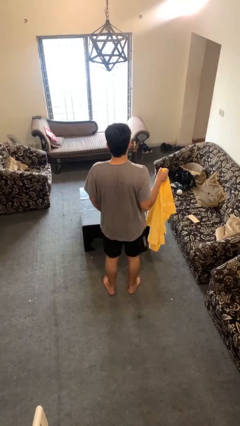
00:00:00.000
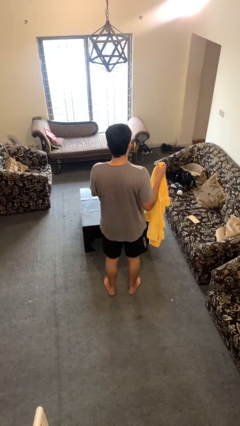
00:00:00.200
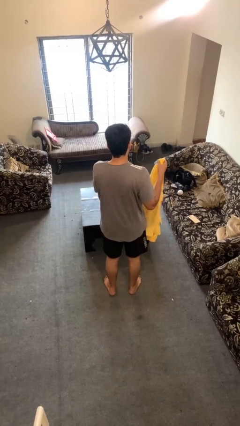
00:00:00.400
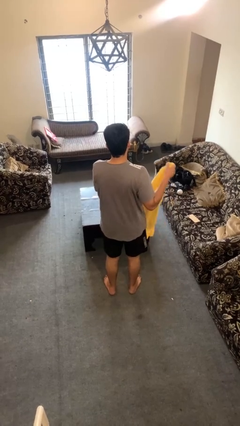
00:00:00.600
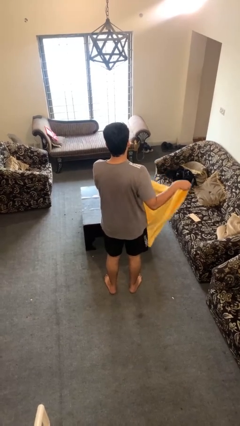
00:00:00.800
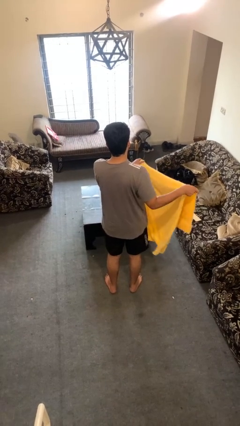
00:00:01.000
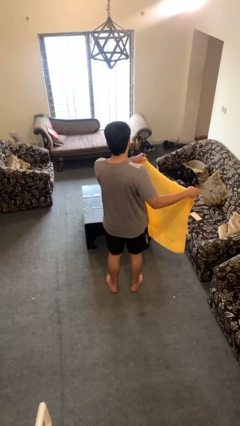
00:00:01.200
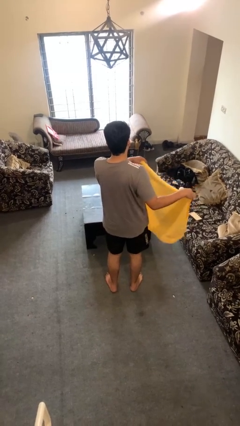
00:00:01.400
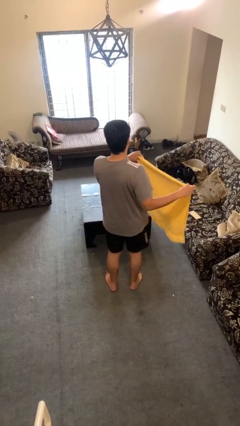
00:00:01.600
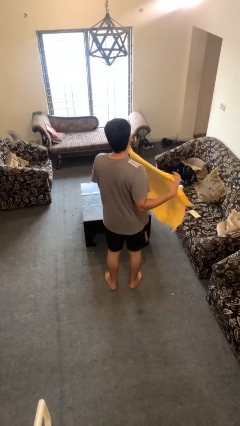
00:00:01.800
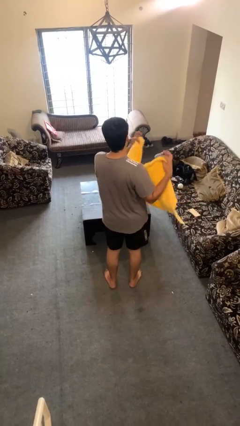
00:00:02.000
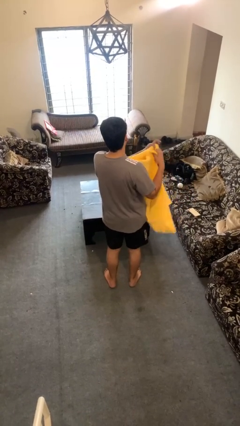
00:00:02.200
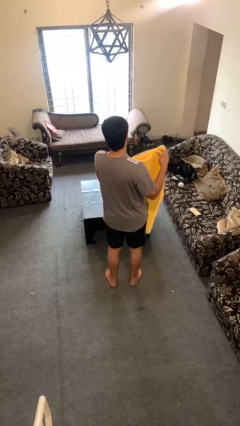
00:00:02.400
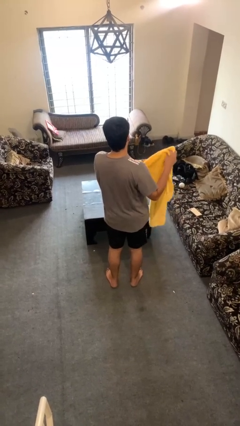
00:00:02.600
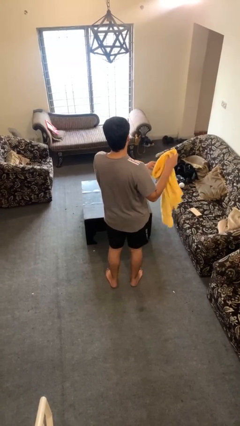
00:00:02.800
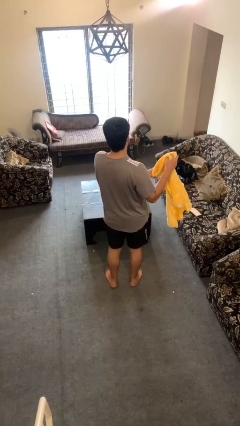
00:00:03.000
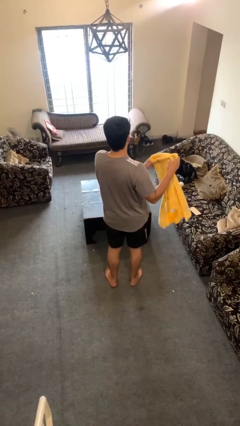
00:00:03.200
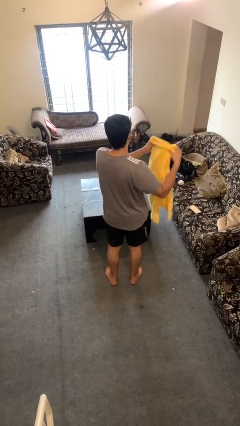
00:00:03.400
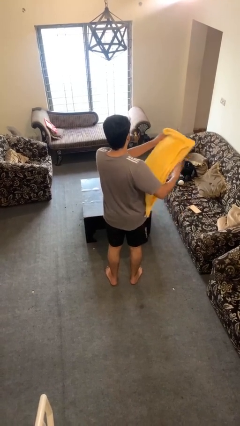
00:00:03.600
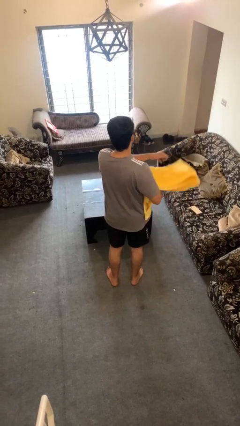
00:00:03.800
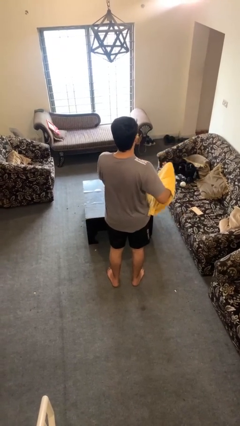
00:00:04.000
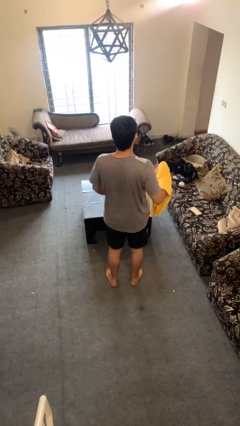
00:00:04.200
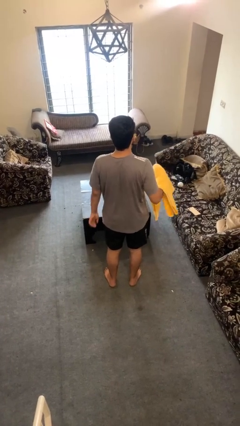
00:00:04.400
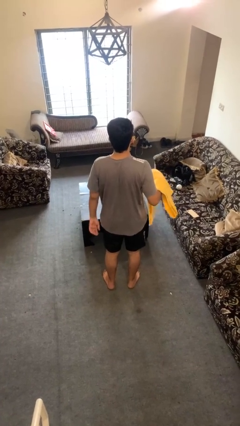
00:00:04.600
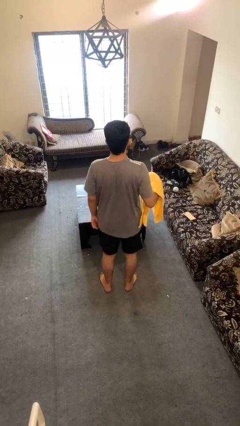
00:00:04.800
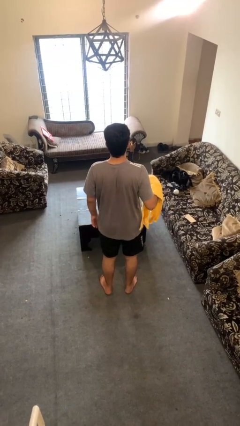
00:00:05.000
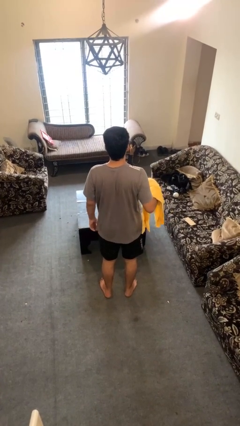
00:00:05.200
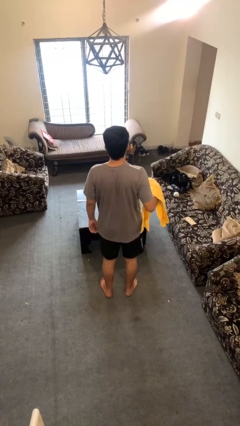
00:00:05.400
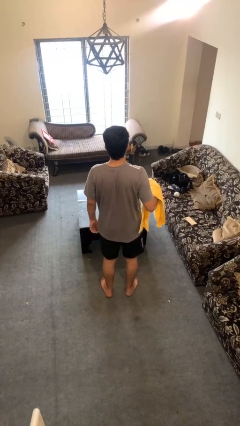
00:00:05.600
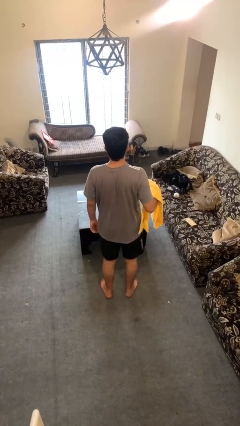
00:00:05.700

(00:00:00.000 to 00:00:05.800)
person folds towel

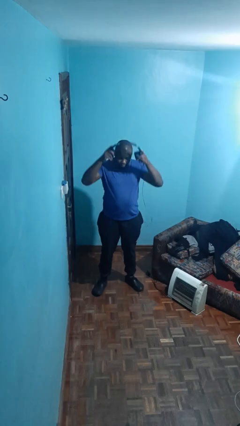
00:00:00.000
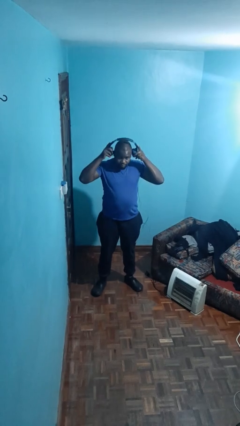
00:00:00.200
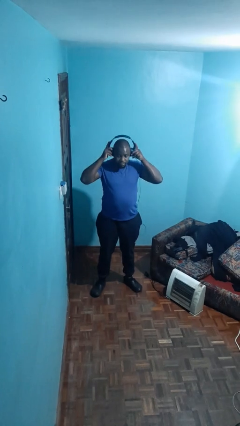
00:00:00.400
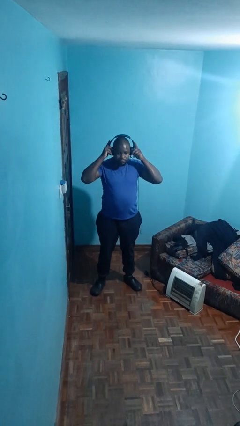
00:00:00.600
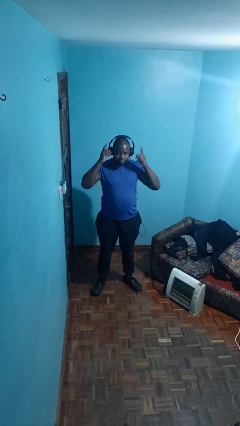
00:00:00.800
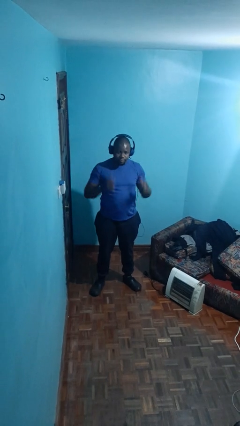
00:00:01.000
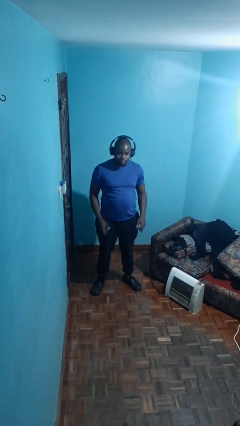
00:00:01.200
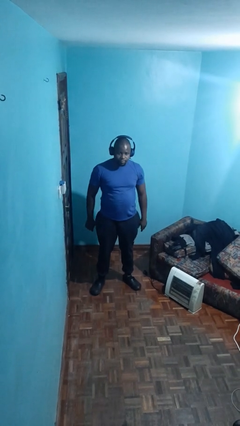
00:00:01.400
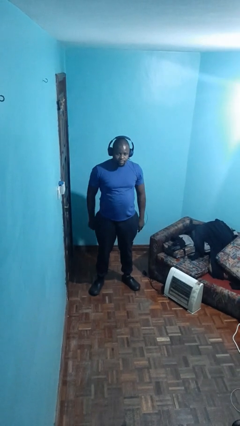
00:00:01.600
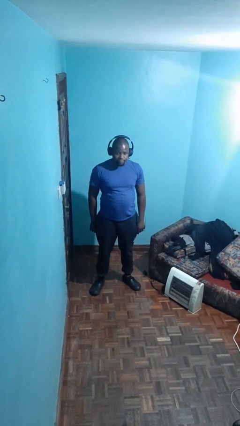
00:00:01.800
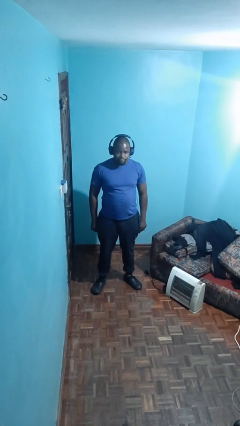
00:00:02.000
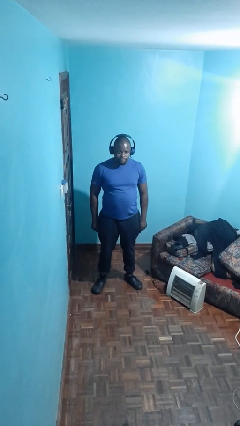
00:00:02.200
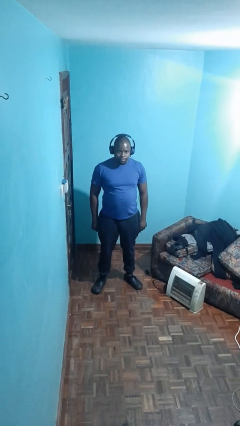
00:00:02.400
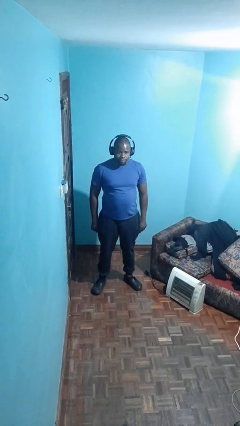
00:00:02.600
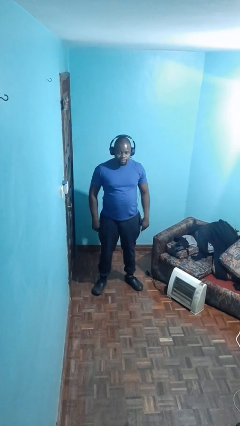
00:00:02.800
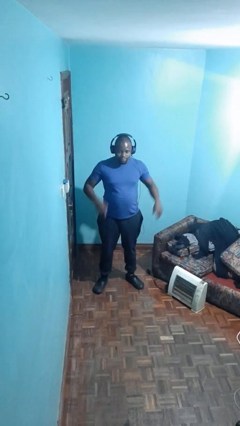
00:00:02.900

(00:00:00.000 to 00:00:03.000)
person puts on headphones

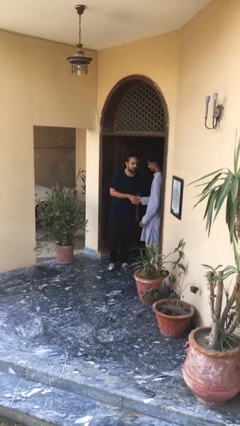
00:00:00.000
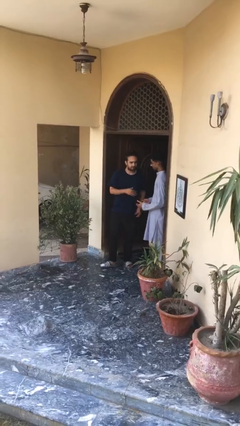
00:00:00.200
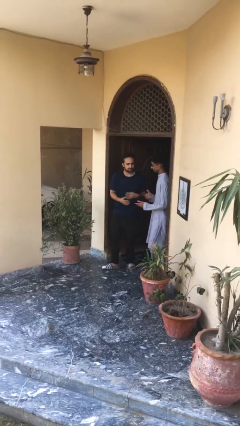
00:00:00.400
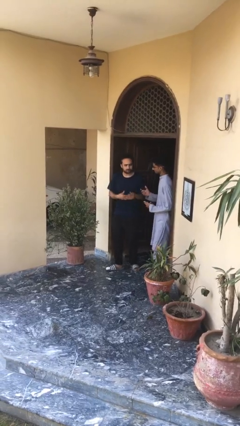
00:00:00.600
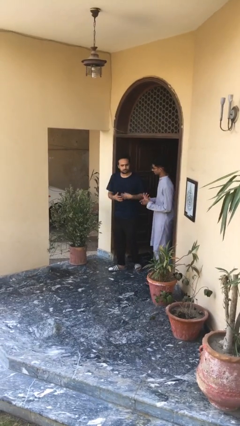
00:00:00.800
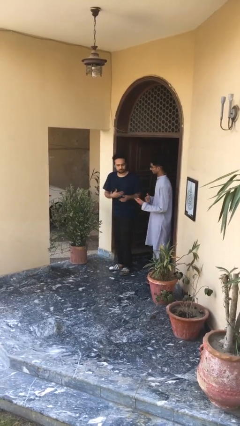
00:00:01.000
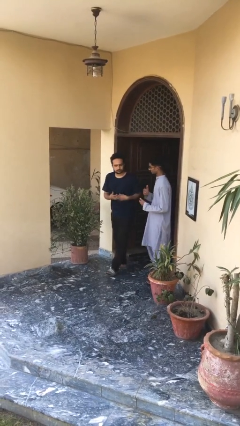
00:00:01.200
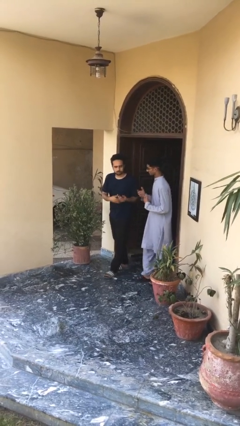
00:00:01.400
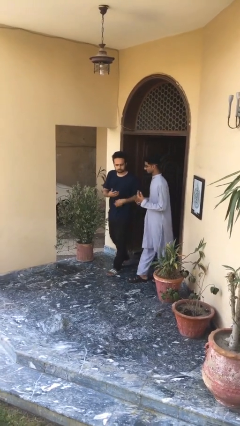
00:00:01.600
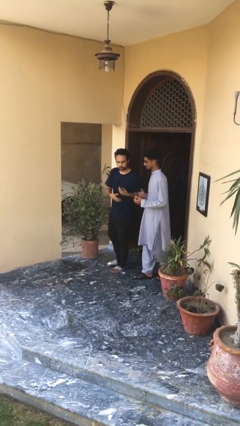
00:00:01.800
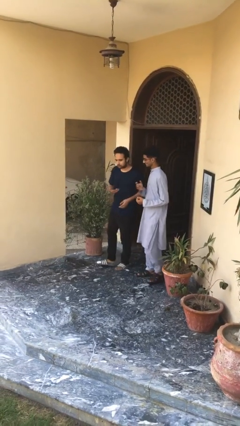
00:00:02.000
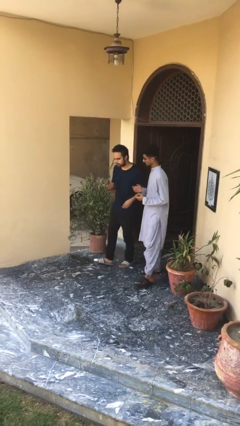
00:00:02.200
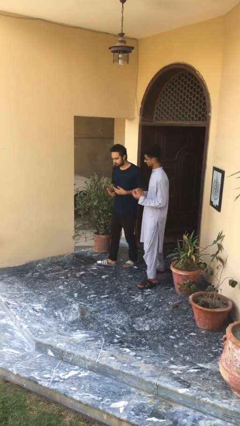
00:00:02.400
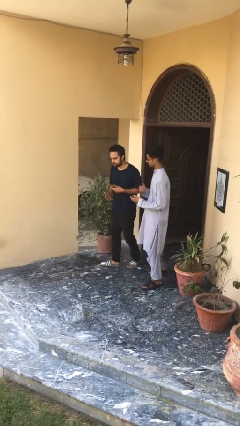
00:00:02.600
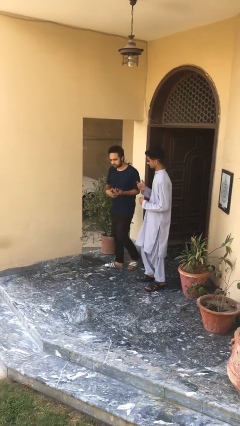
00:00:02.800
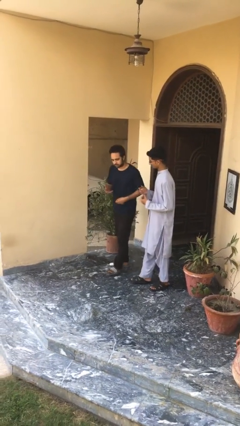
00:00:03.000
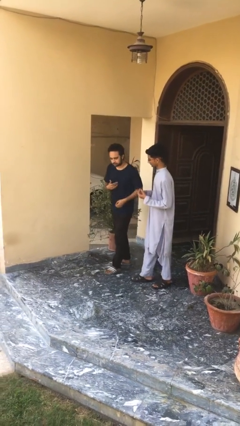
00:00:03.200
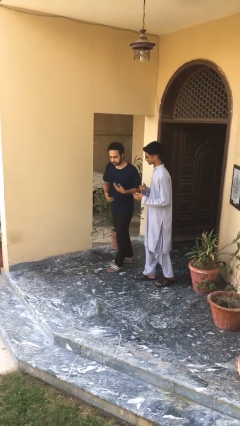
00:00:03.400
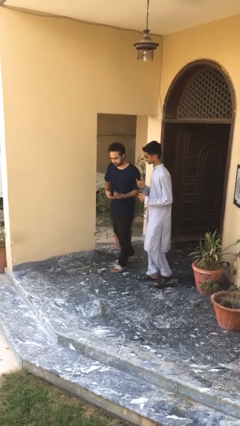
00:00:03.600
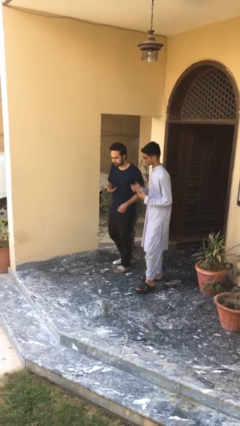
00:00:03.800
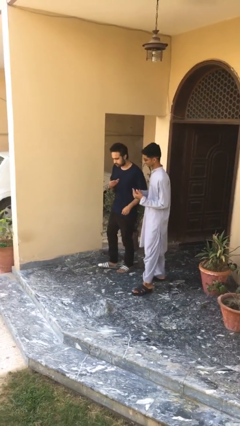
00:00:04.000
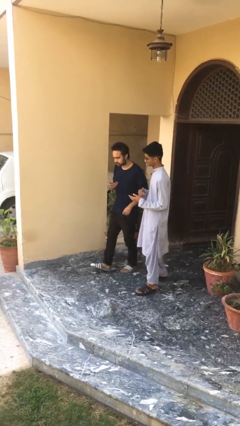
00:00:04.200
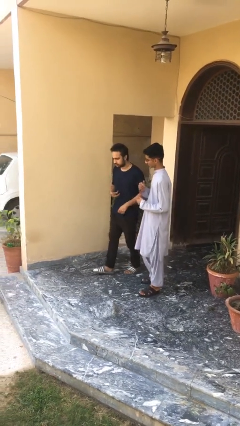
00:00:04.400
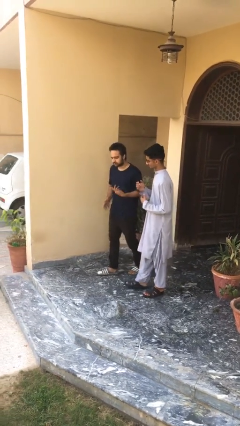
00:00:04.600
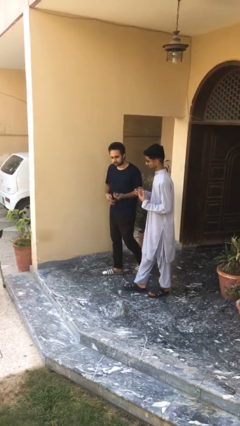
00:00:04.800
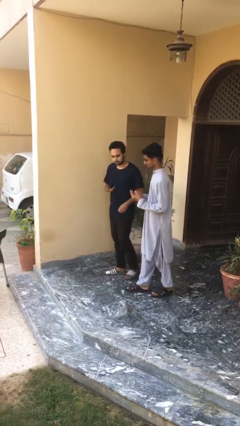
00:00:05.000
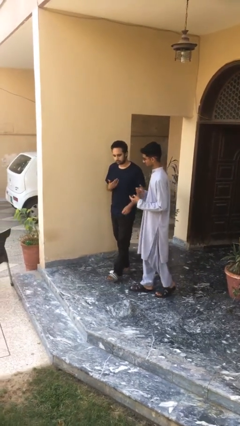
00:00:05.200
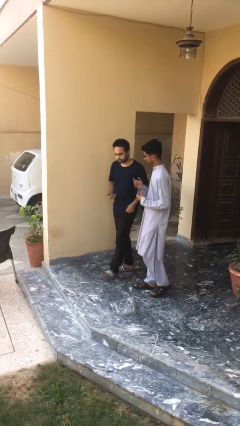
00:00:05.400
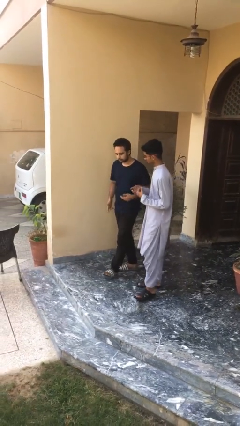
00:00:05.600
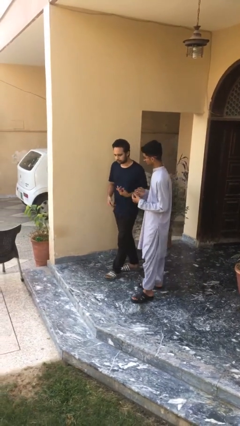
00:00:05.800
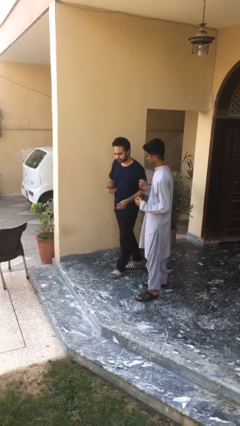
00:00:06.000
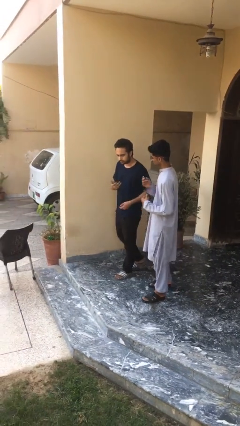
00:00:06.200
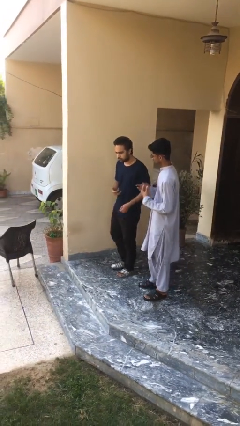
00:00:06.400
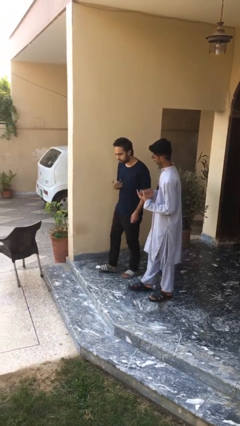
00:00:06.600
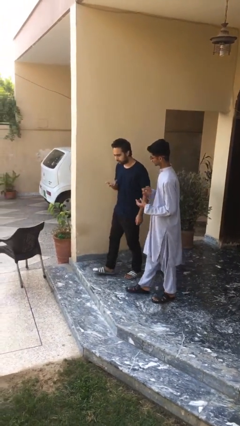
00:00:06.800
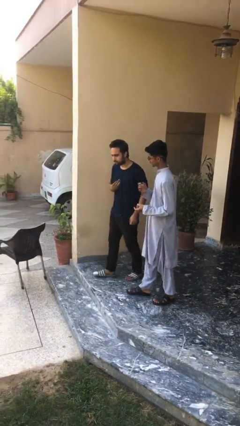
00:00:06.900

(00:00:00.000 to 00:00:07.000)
person talks to person

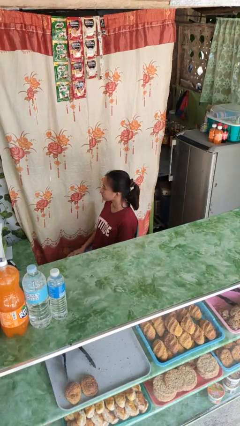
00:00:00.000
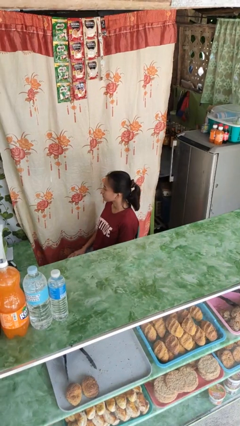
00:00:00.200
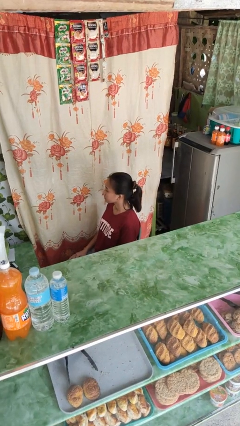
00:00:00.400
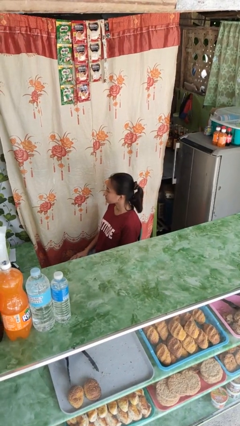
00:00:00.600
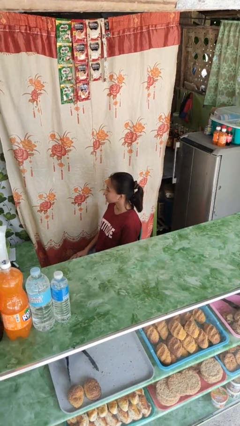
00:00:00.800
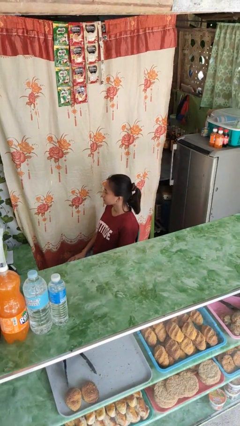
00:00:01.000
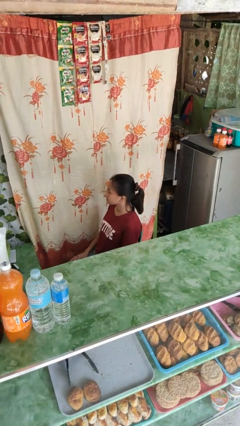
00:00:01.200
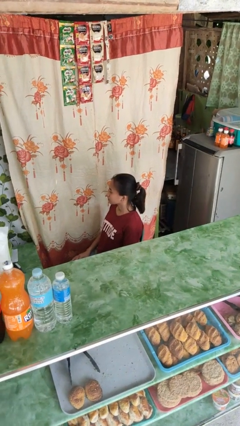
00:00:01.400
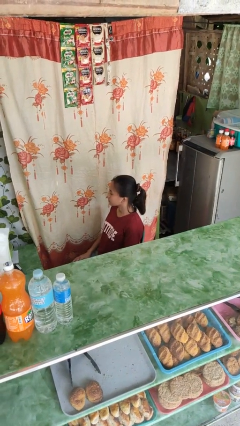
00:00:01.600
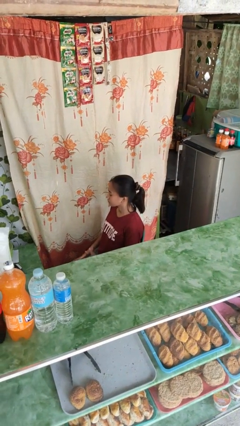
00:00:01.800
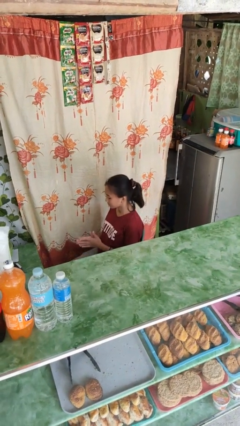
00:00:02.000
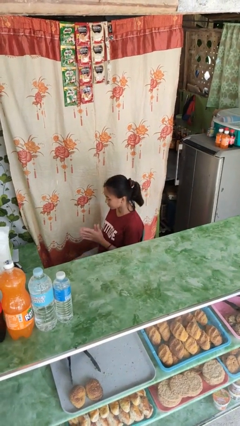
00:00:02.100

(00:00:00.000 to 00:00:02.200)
person rubs eyes
